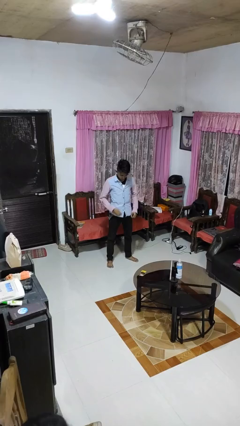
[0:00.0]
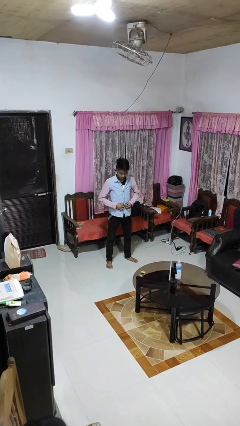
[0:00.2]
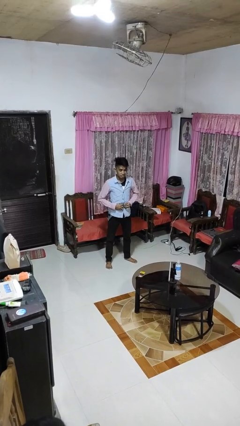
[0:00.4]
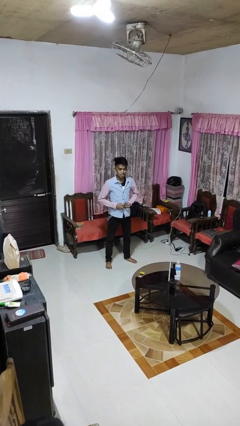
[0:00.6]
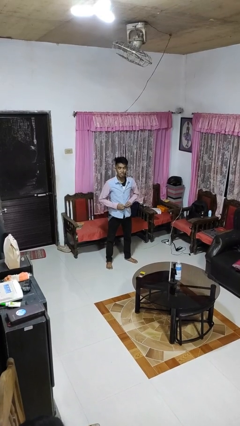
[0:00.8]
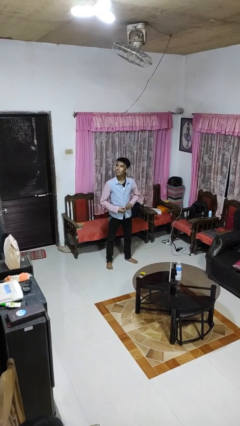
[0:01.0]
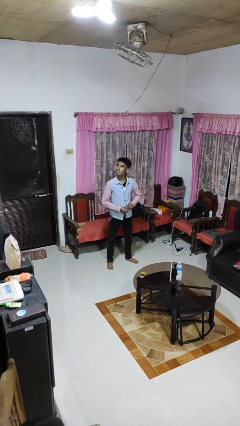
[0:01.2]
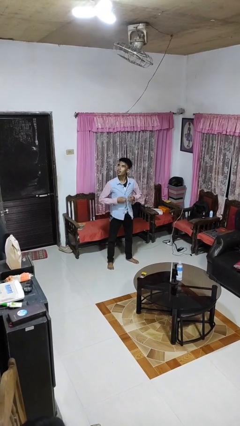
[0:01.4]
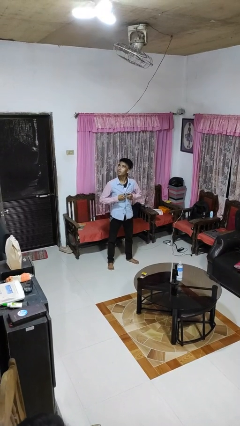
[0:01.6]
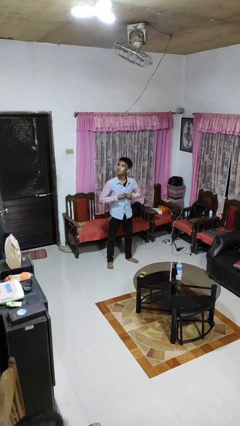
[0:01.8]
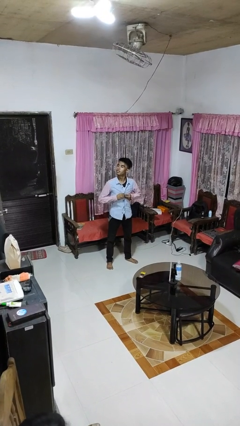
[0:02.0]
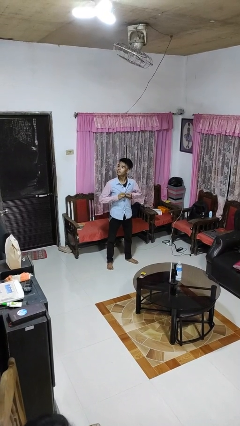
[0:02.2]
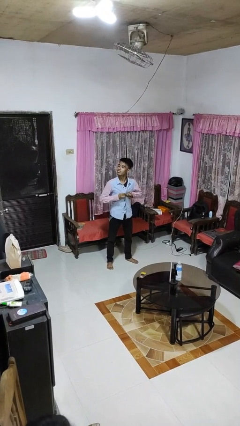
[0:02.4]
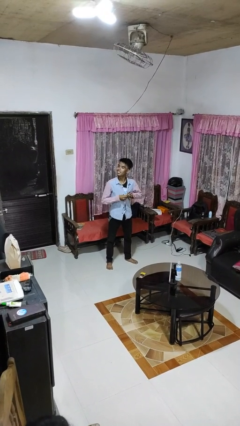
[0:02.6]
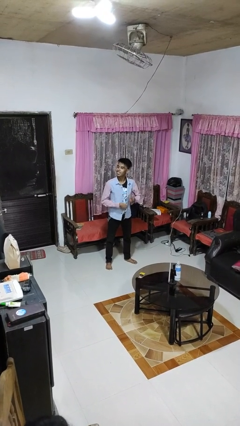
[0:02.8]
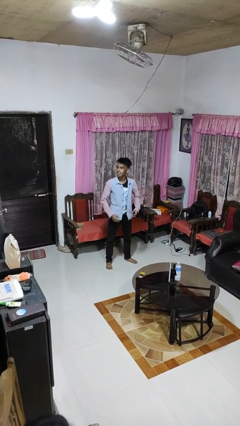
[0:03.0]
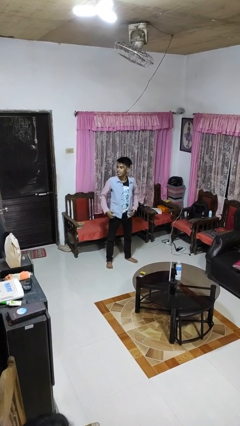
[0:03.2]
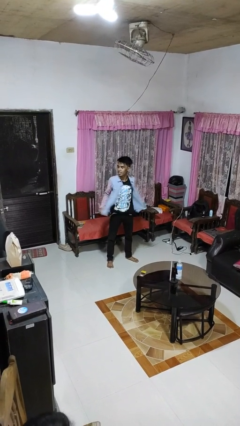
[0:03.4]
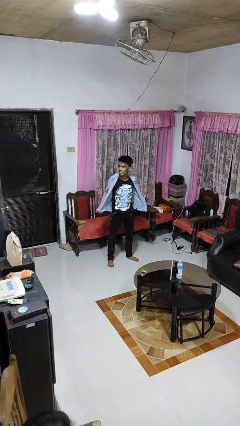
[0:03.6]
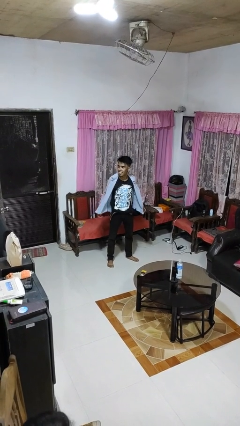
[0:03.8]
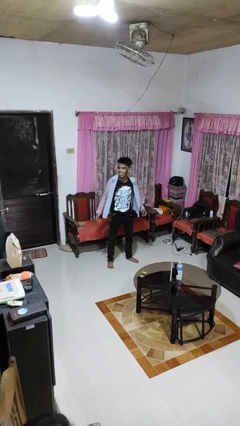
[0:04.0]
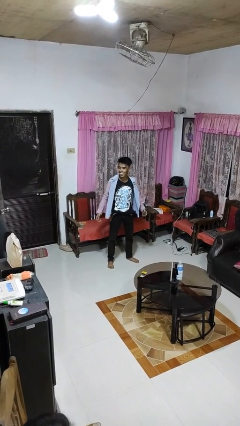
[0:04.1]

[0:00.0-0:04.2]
person unbuttons shirt

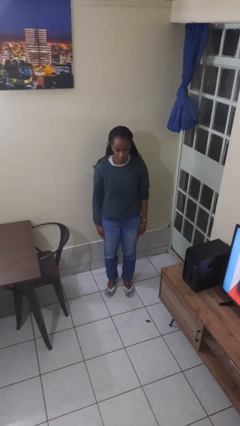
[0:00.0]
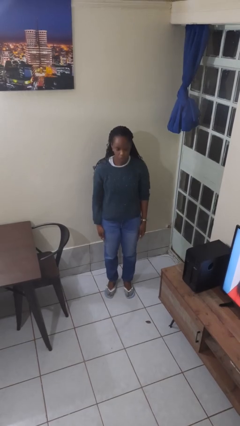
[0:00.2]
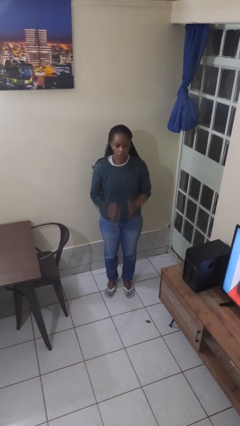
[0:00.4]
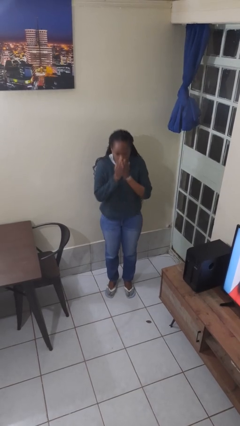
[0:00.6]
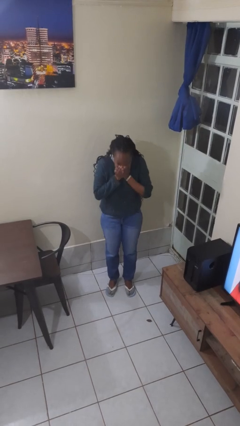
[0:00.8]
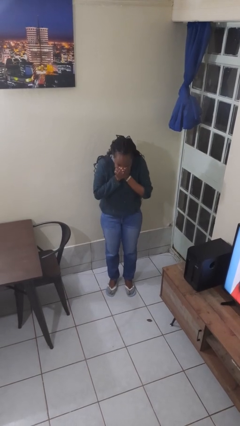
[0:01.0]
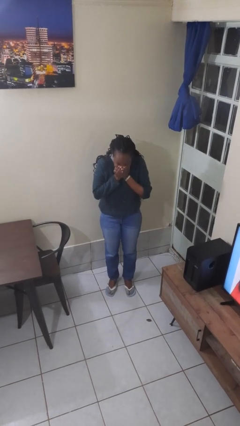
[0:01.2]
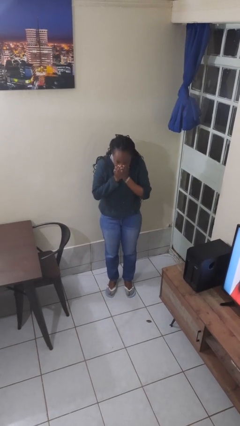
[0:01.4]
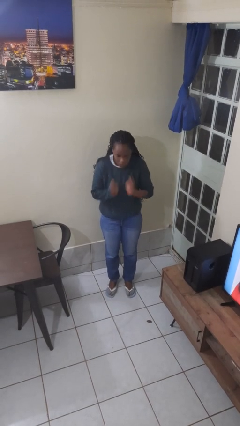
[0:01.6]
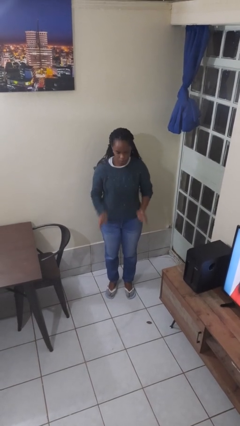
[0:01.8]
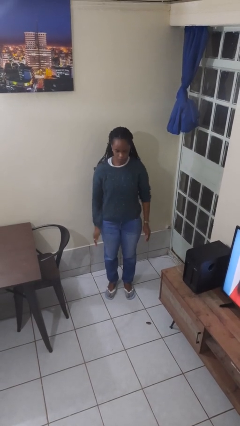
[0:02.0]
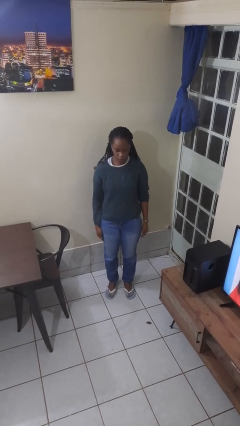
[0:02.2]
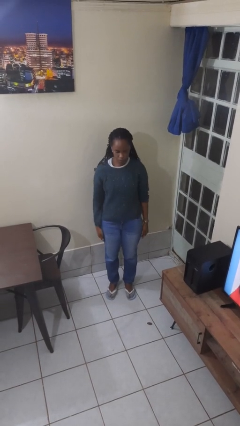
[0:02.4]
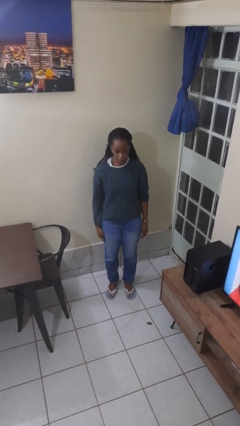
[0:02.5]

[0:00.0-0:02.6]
person sneezes into hand

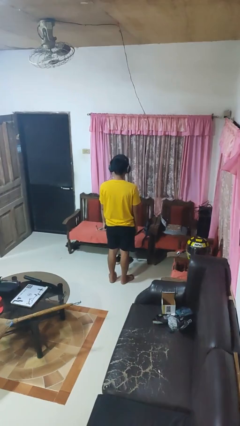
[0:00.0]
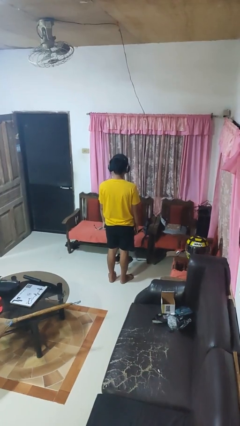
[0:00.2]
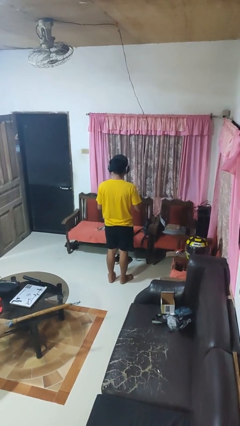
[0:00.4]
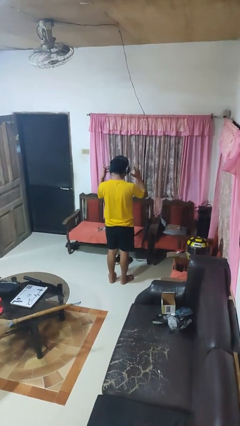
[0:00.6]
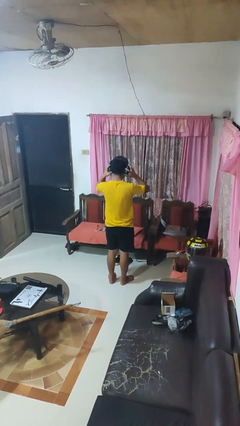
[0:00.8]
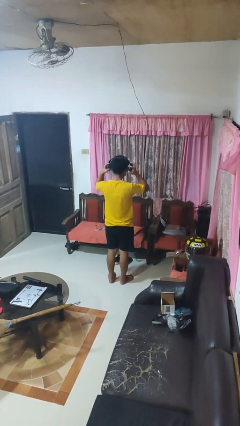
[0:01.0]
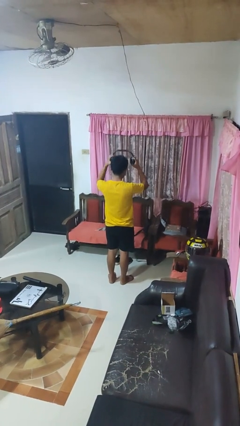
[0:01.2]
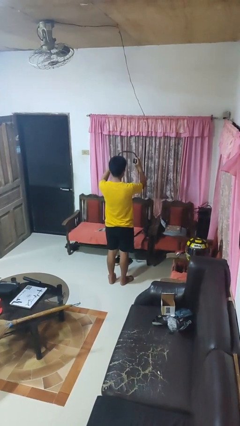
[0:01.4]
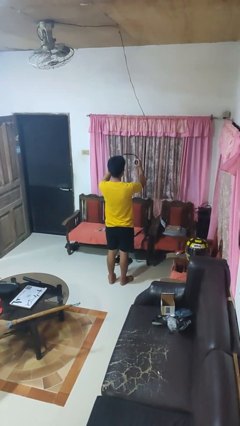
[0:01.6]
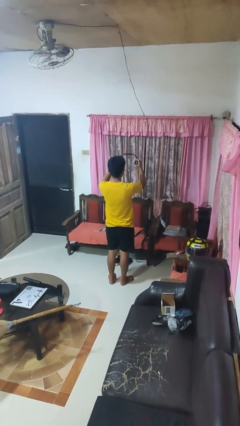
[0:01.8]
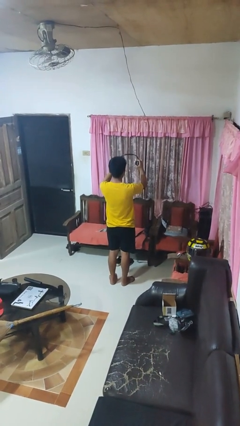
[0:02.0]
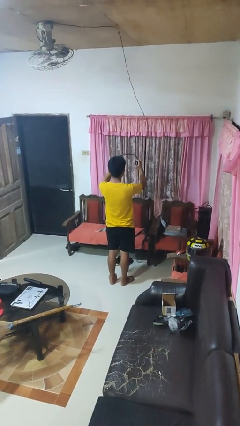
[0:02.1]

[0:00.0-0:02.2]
person takes off headphones

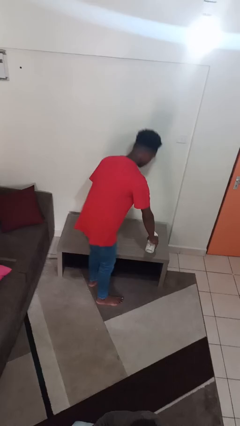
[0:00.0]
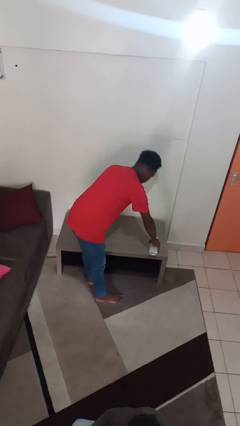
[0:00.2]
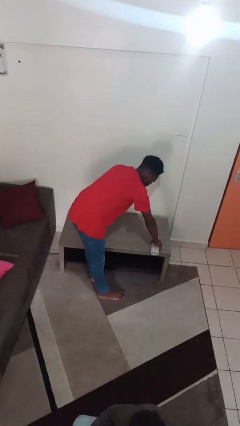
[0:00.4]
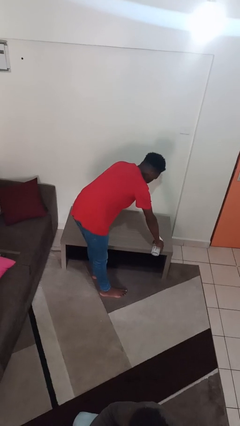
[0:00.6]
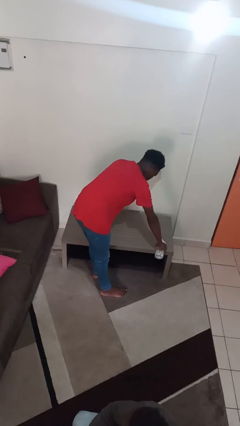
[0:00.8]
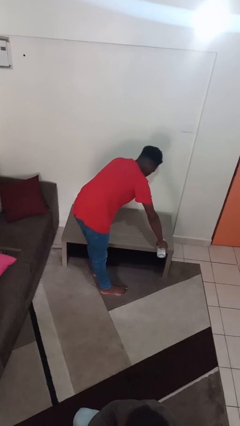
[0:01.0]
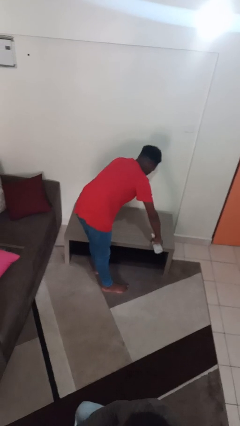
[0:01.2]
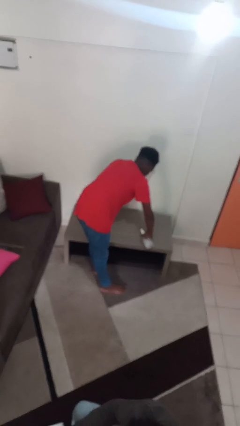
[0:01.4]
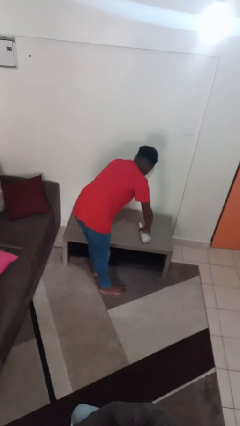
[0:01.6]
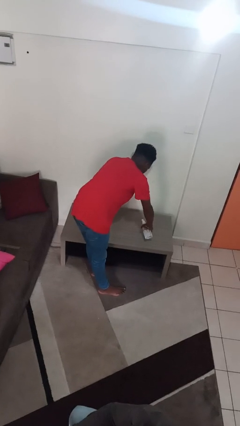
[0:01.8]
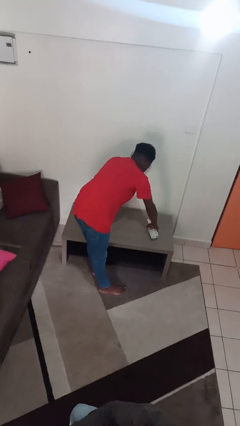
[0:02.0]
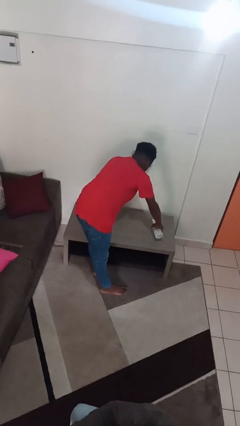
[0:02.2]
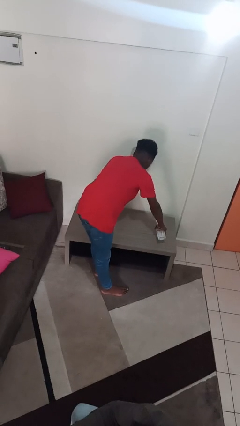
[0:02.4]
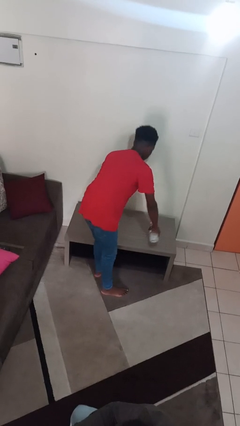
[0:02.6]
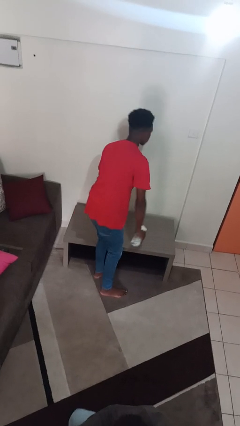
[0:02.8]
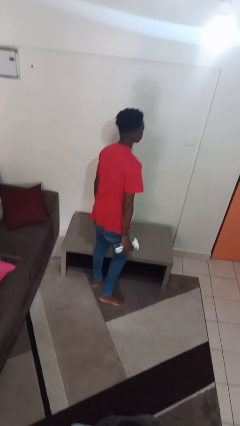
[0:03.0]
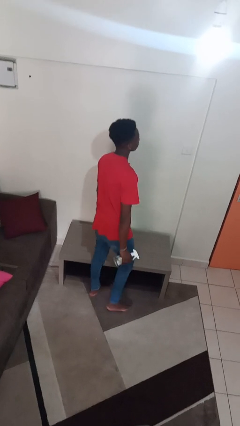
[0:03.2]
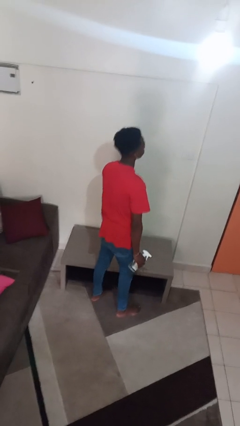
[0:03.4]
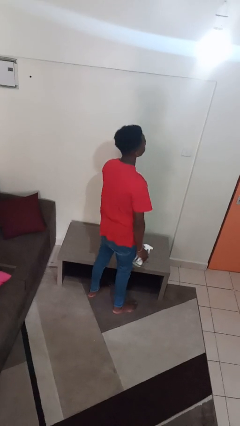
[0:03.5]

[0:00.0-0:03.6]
person sprays from bottle

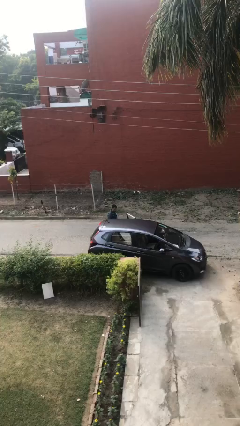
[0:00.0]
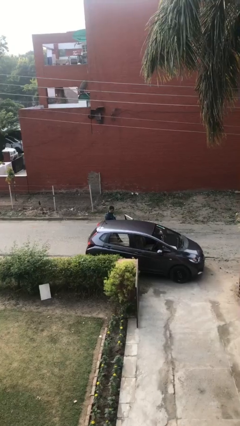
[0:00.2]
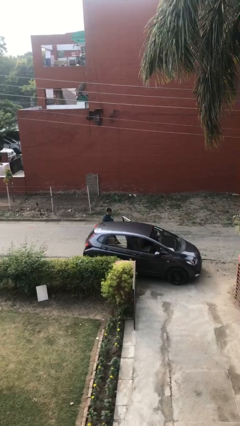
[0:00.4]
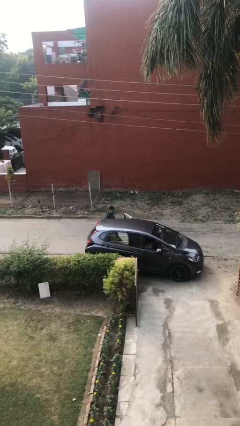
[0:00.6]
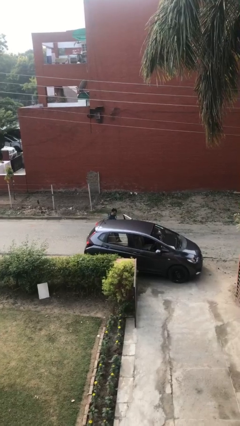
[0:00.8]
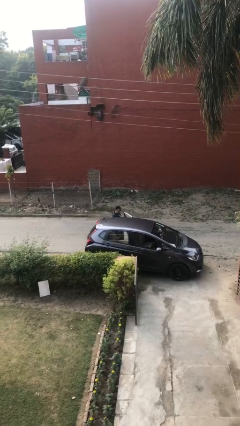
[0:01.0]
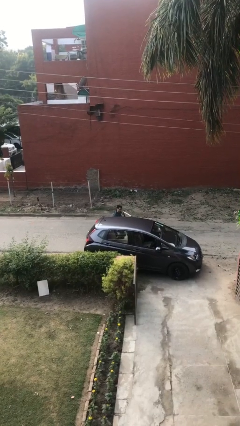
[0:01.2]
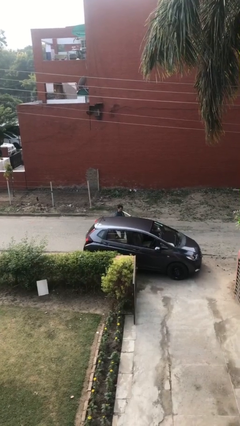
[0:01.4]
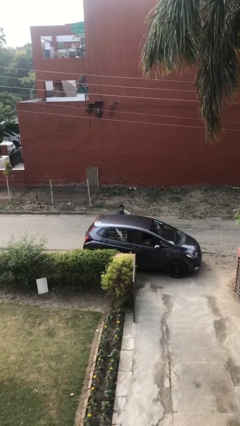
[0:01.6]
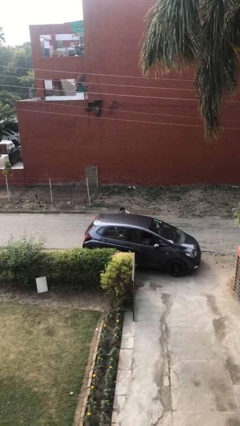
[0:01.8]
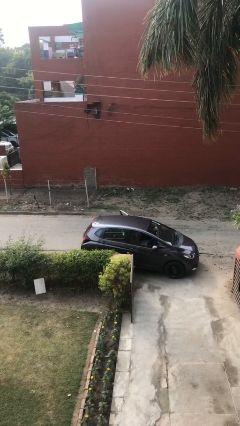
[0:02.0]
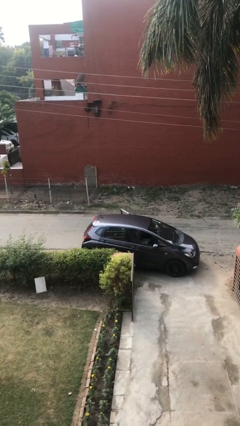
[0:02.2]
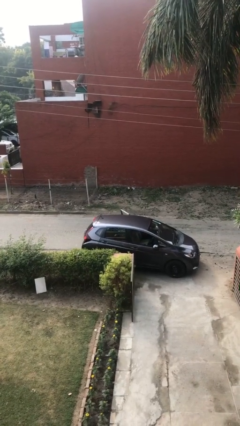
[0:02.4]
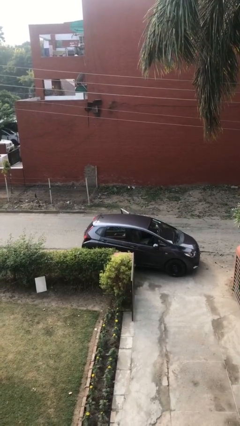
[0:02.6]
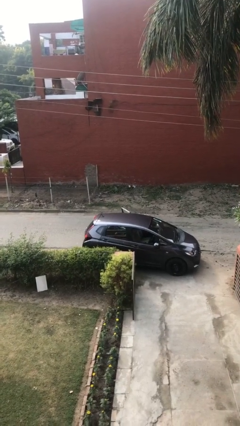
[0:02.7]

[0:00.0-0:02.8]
person enters car

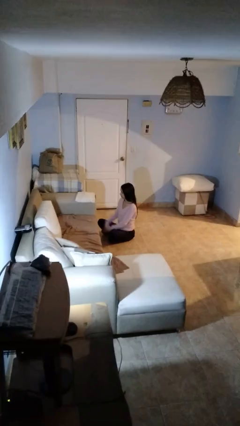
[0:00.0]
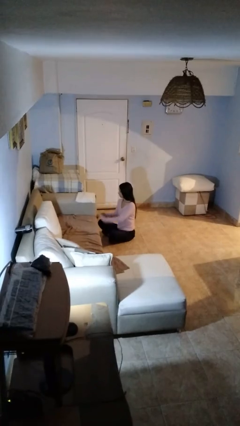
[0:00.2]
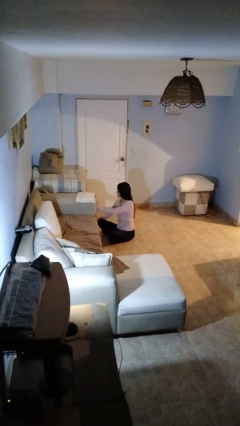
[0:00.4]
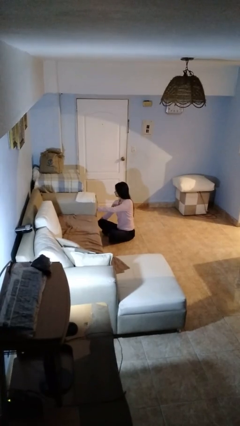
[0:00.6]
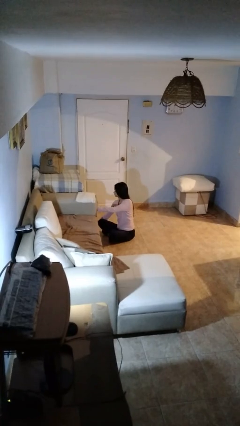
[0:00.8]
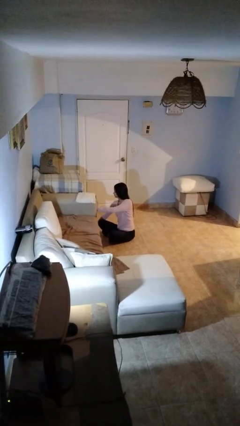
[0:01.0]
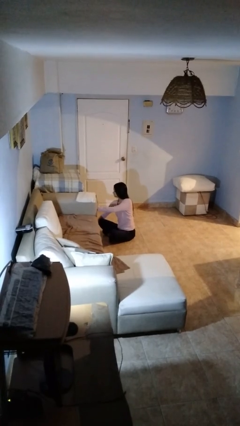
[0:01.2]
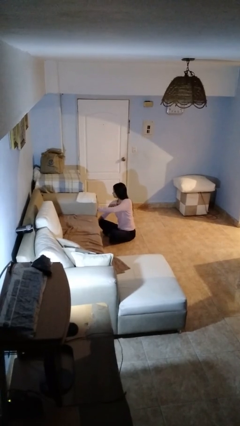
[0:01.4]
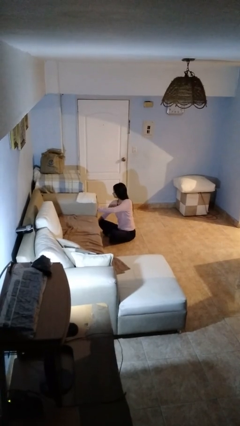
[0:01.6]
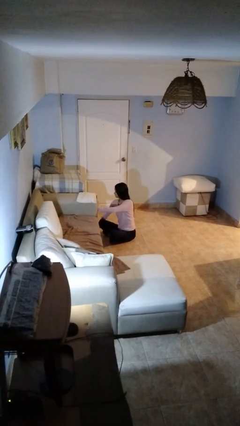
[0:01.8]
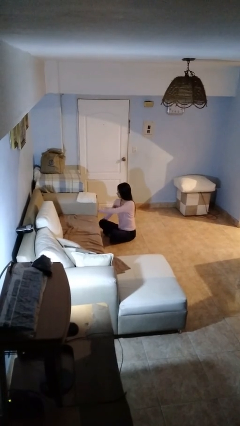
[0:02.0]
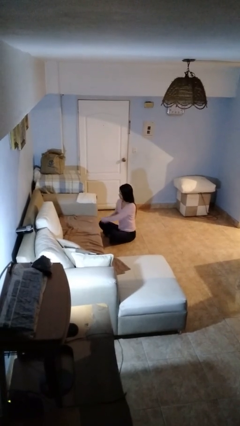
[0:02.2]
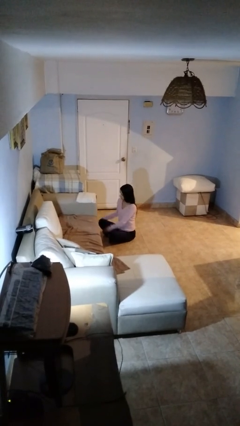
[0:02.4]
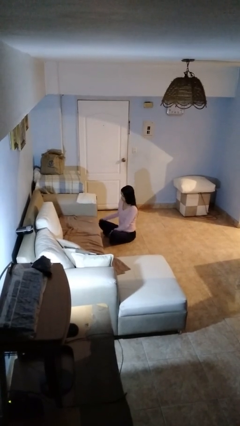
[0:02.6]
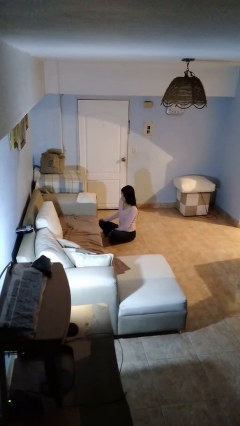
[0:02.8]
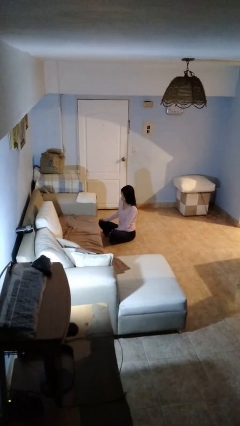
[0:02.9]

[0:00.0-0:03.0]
person searches under couch
